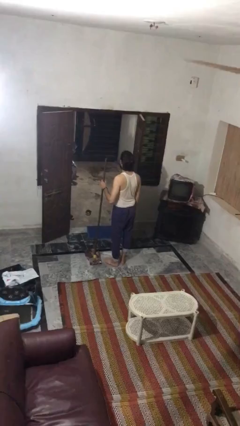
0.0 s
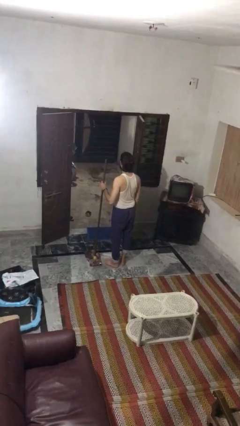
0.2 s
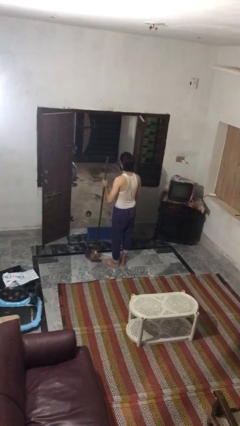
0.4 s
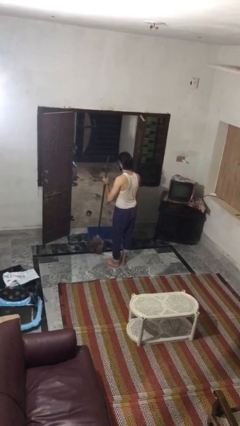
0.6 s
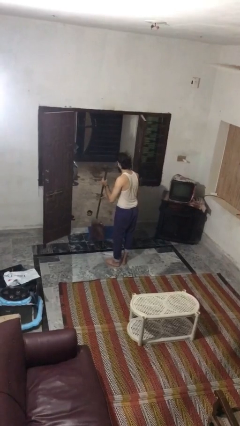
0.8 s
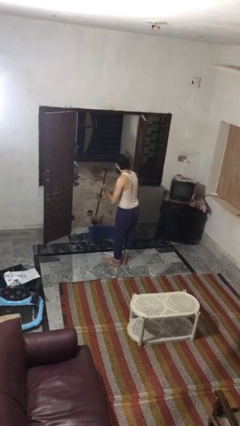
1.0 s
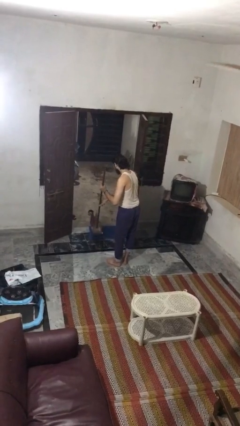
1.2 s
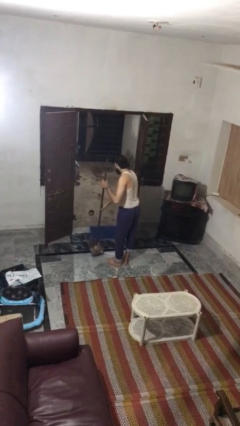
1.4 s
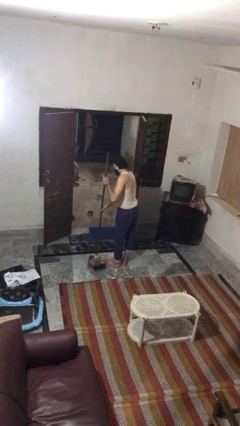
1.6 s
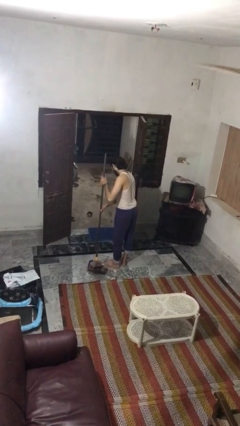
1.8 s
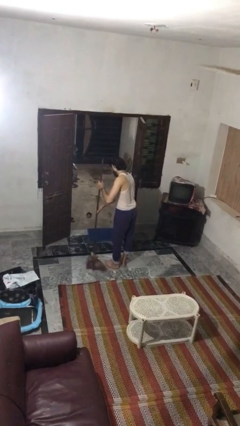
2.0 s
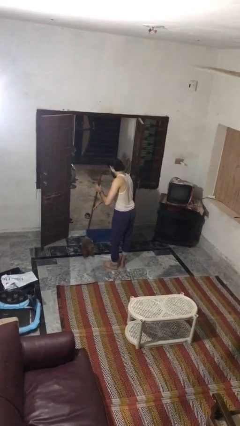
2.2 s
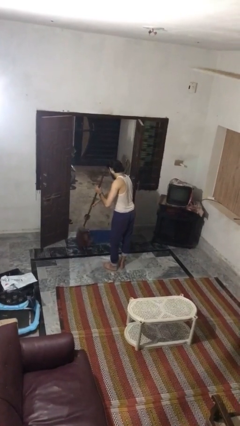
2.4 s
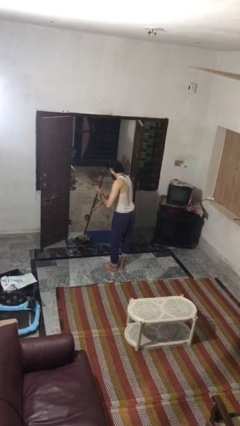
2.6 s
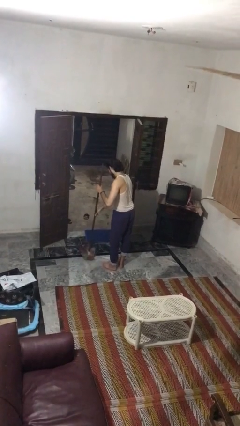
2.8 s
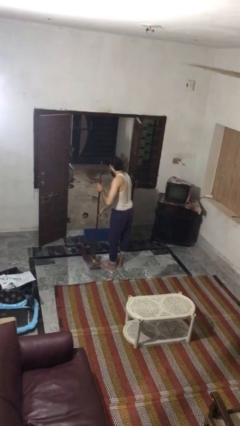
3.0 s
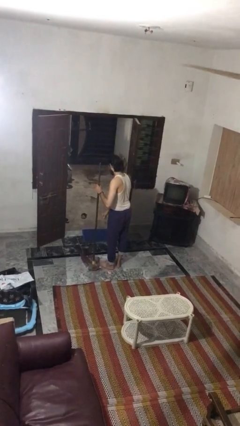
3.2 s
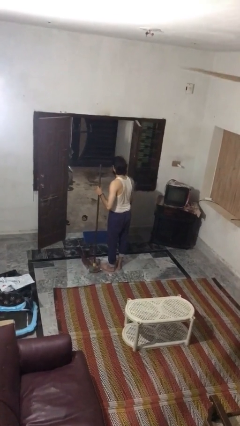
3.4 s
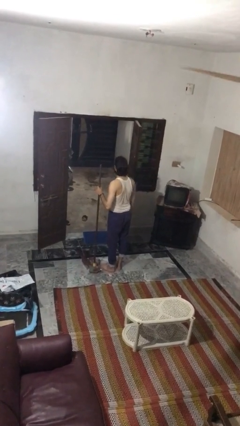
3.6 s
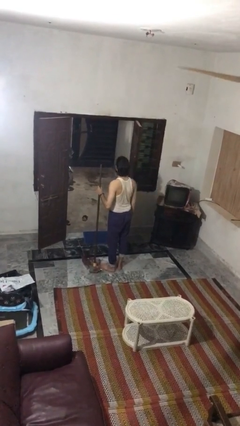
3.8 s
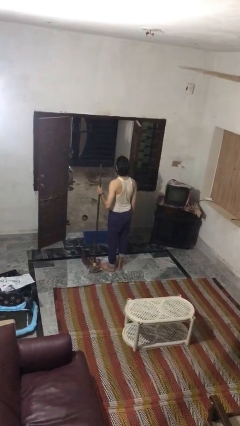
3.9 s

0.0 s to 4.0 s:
person mops

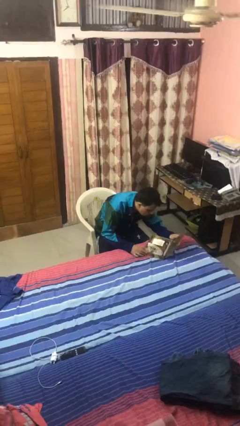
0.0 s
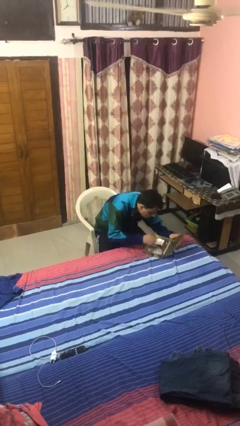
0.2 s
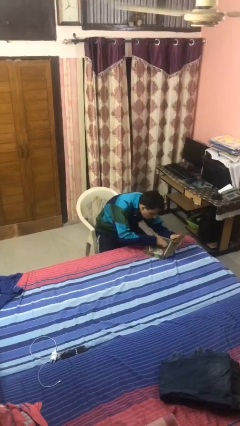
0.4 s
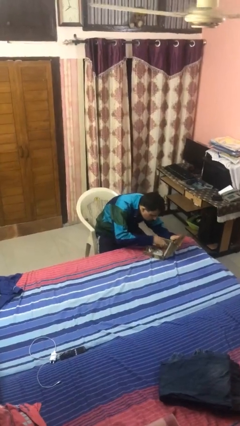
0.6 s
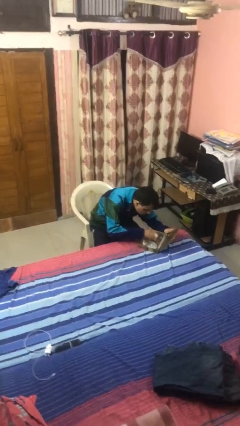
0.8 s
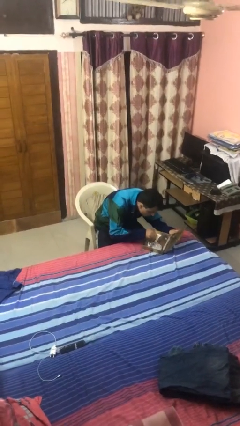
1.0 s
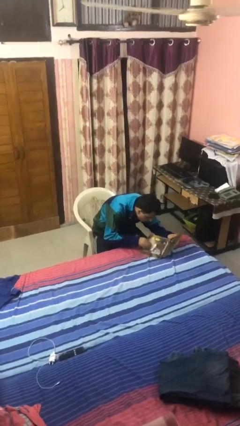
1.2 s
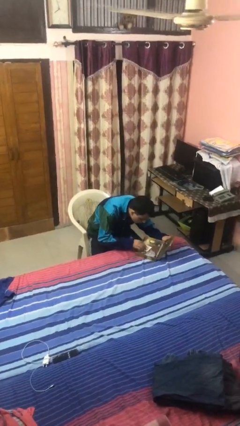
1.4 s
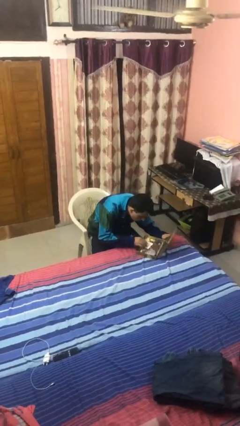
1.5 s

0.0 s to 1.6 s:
person searches jewelry box

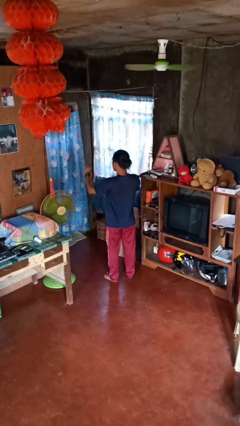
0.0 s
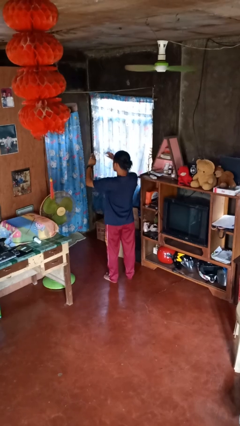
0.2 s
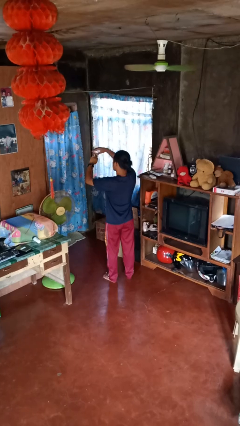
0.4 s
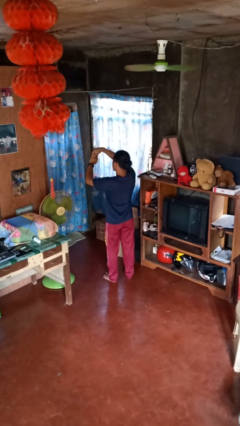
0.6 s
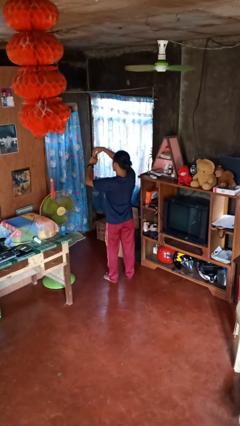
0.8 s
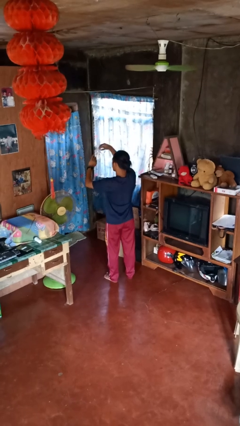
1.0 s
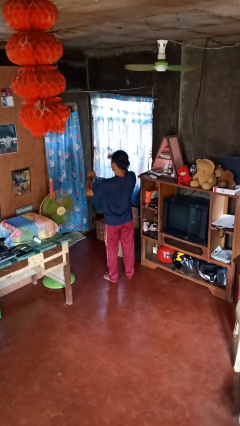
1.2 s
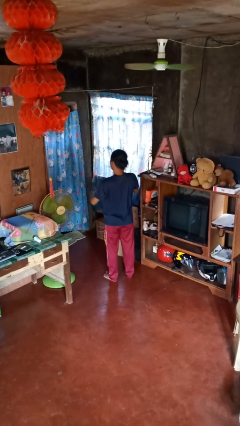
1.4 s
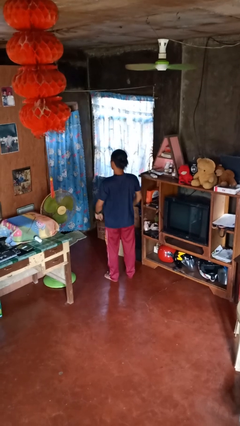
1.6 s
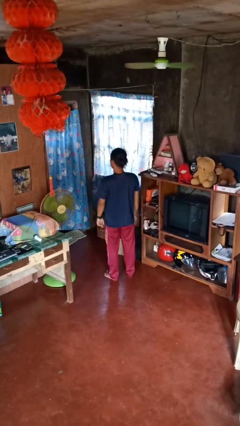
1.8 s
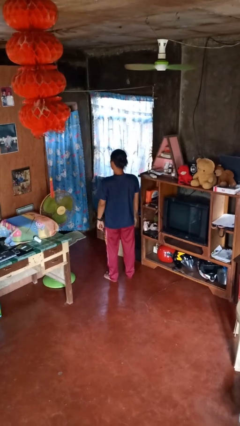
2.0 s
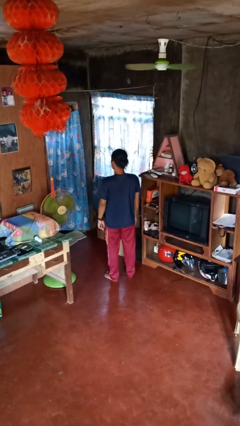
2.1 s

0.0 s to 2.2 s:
person takes off ring

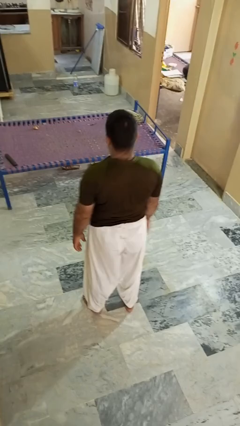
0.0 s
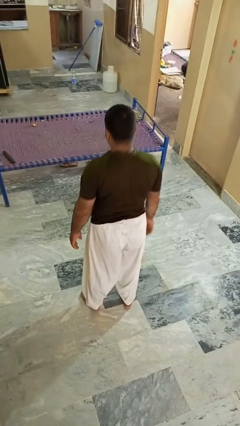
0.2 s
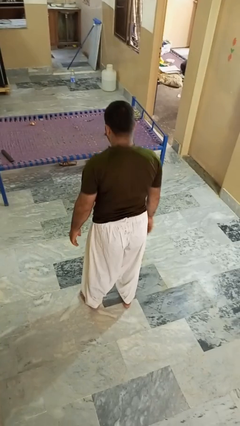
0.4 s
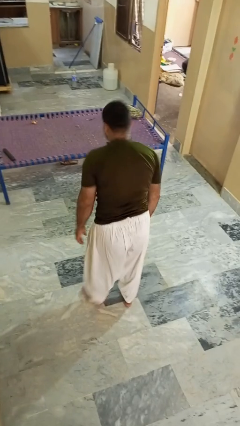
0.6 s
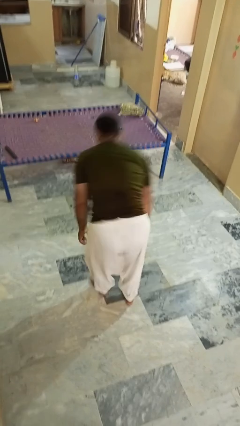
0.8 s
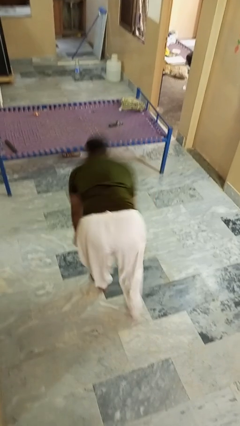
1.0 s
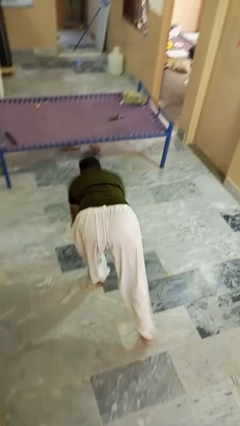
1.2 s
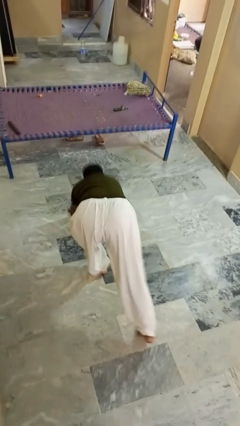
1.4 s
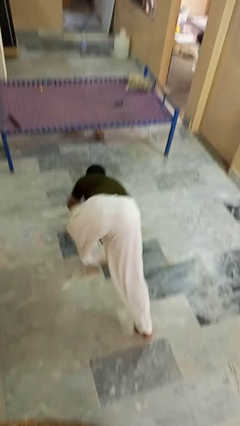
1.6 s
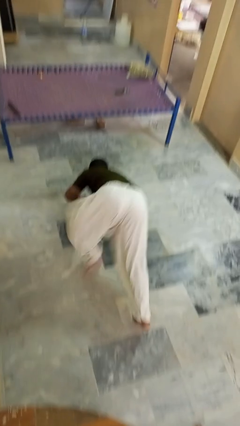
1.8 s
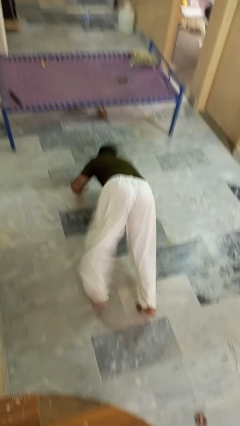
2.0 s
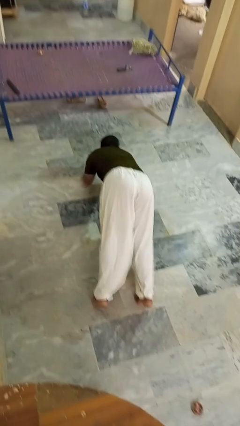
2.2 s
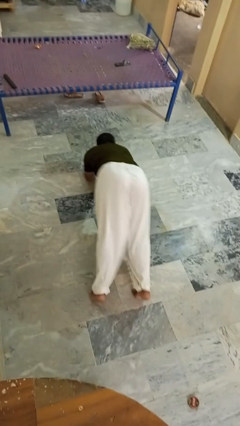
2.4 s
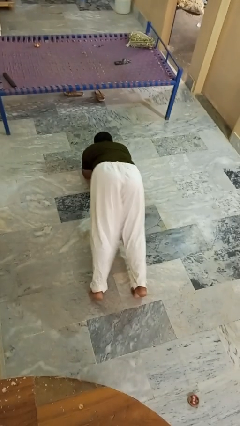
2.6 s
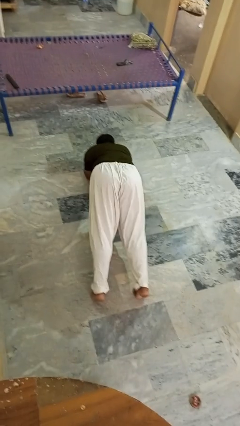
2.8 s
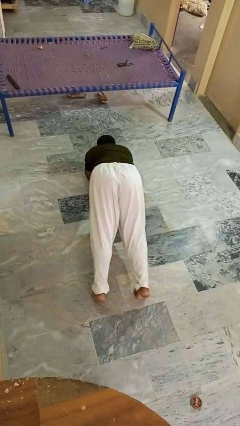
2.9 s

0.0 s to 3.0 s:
person exercises with plank

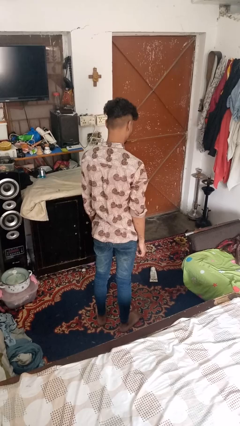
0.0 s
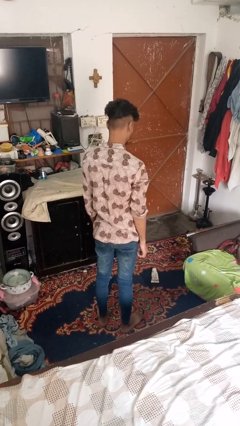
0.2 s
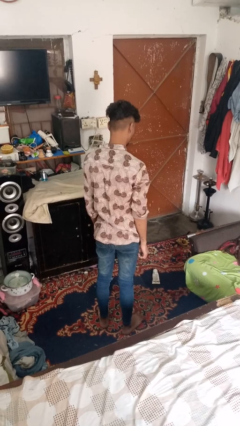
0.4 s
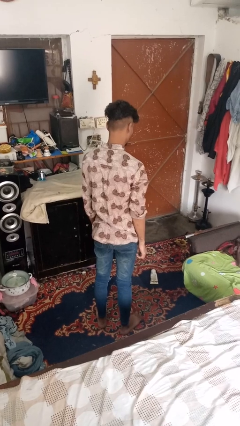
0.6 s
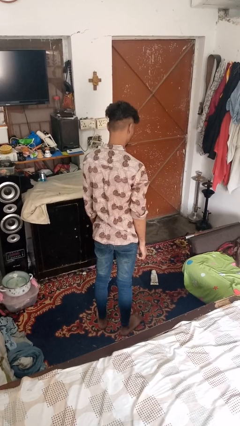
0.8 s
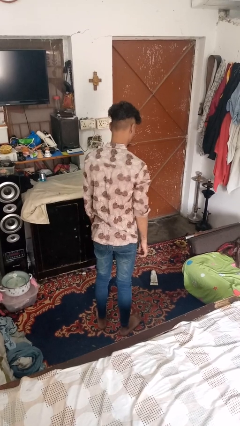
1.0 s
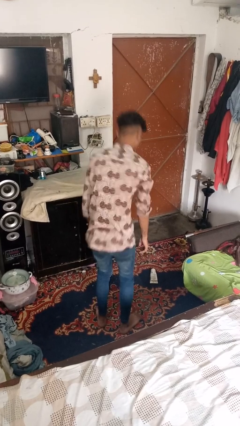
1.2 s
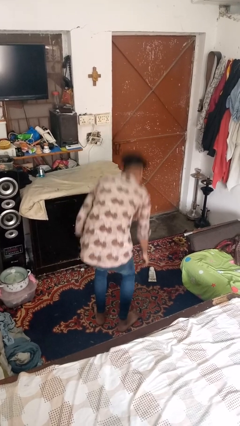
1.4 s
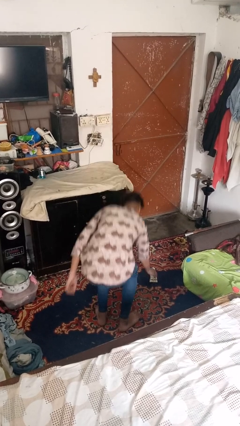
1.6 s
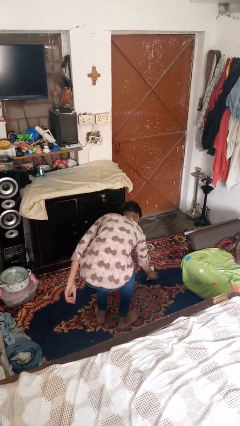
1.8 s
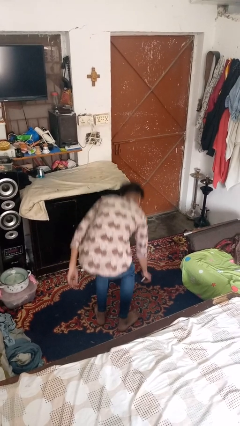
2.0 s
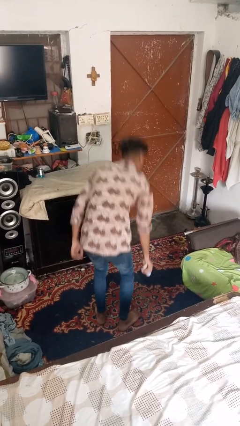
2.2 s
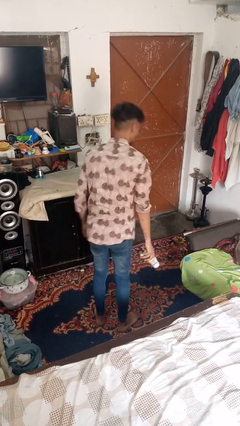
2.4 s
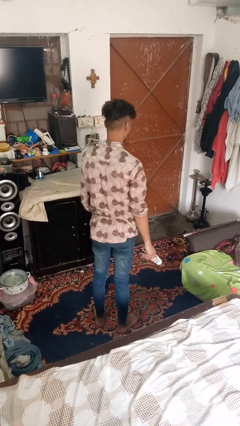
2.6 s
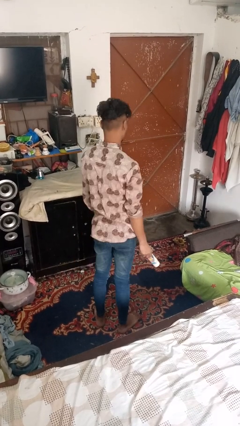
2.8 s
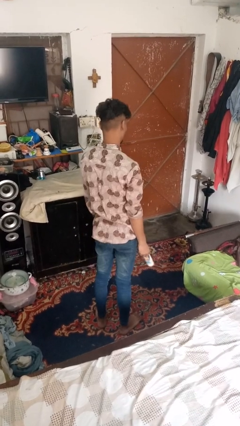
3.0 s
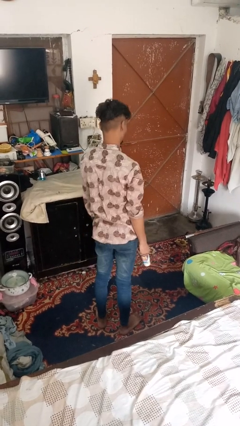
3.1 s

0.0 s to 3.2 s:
person picks up object from floor

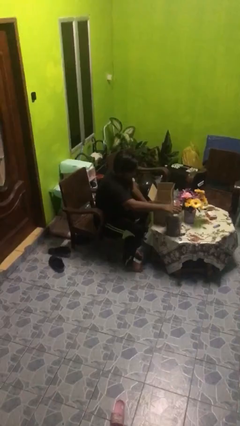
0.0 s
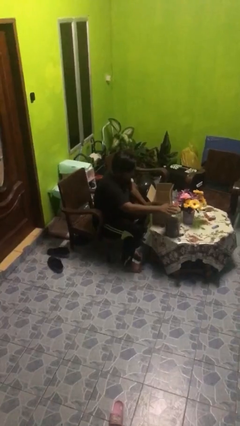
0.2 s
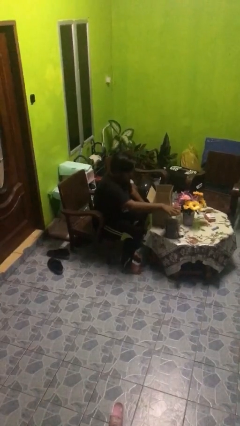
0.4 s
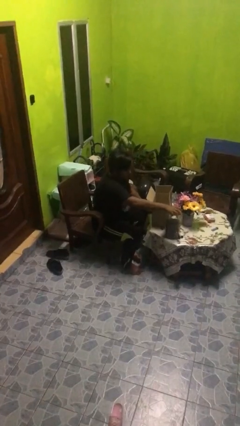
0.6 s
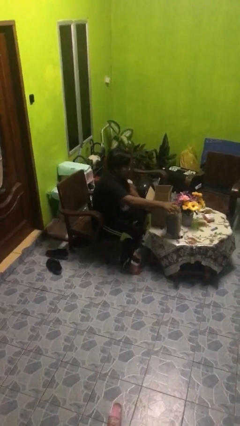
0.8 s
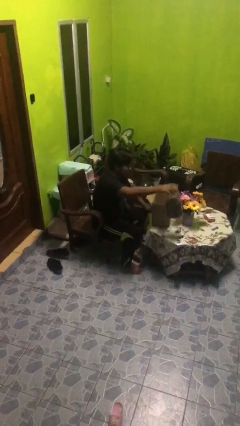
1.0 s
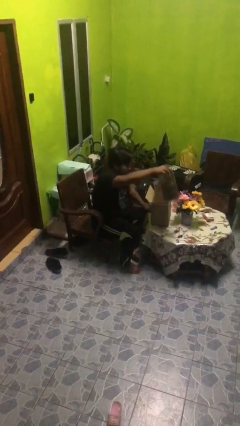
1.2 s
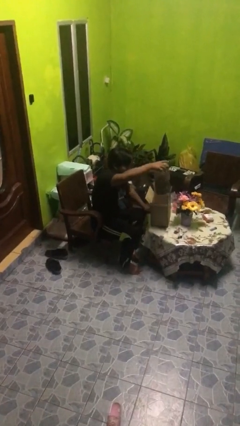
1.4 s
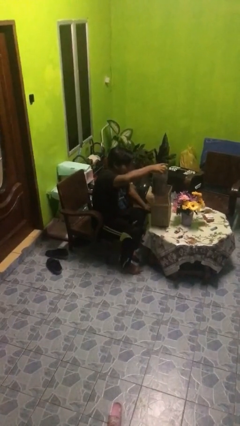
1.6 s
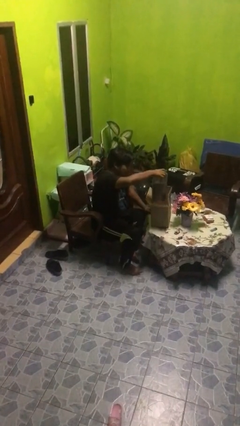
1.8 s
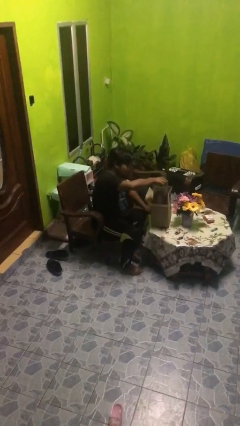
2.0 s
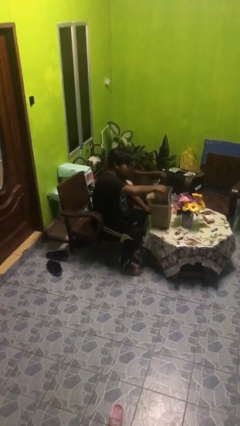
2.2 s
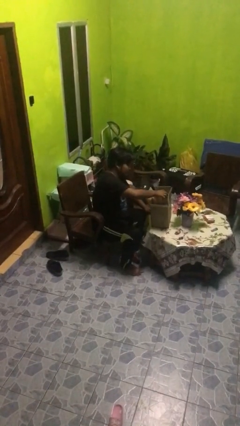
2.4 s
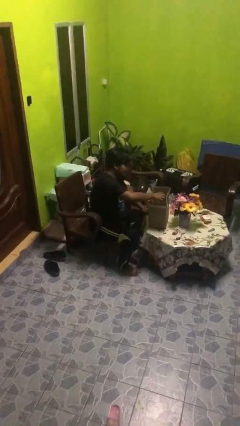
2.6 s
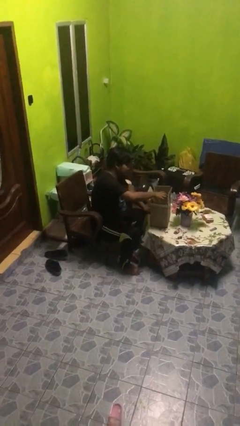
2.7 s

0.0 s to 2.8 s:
person puts object into box

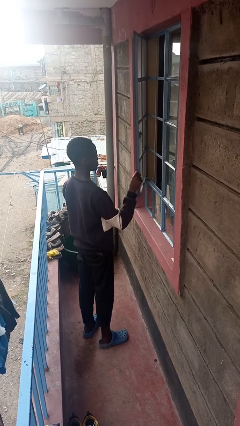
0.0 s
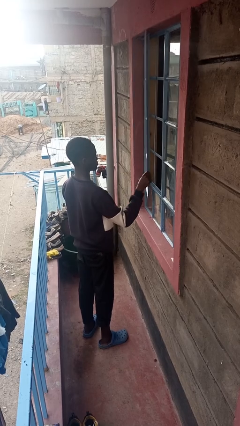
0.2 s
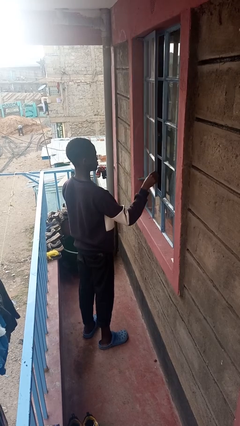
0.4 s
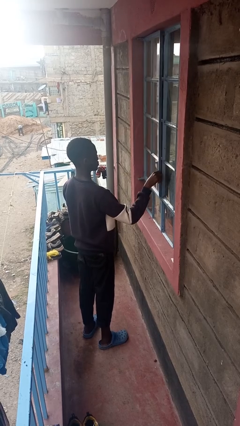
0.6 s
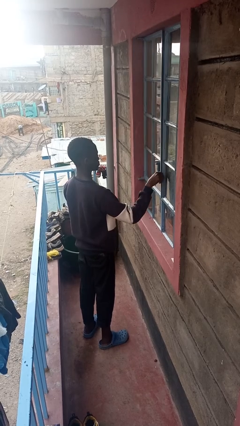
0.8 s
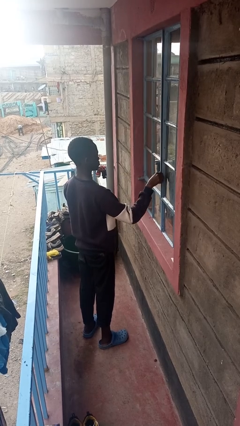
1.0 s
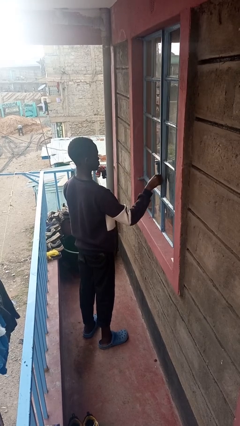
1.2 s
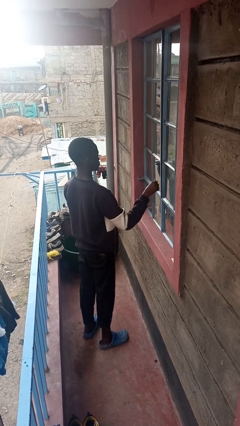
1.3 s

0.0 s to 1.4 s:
person closes home window
